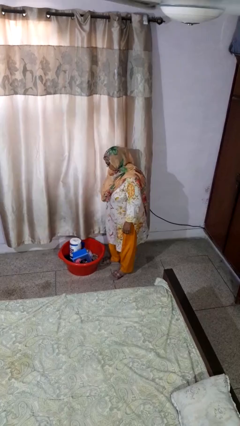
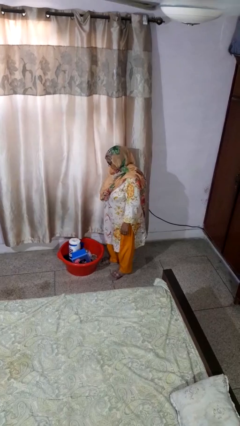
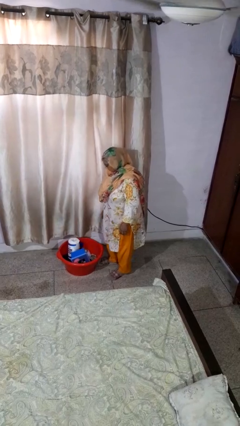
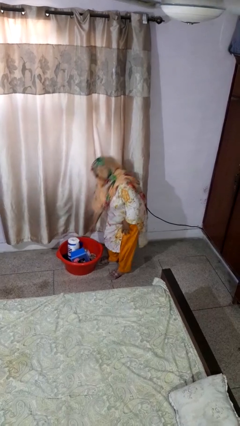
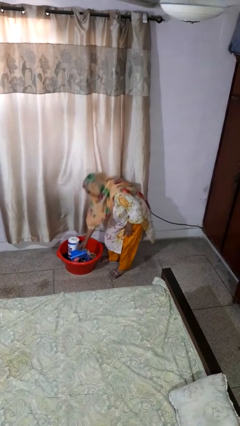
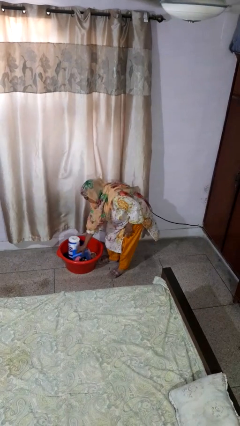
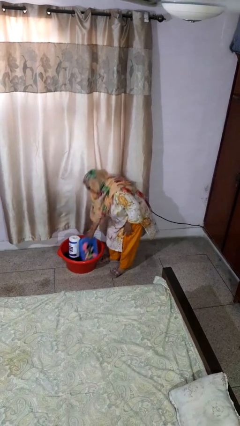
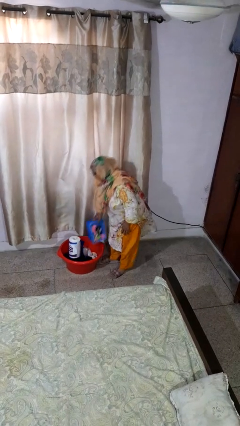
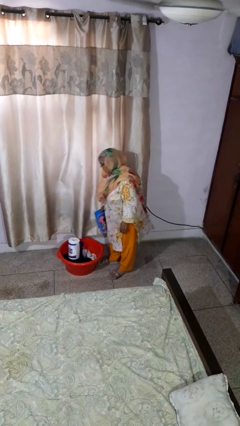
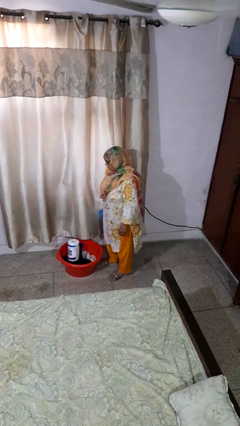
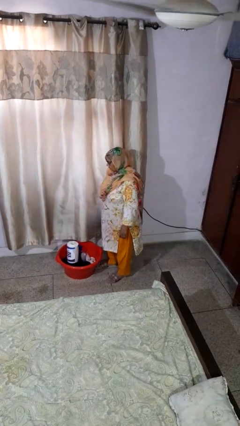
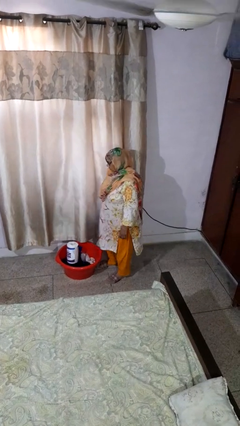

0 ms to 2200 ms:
person takes object from basket

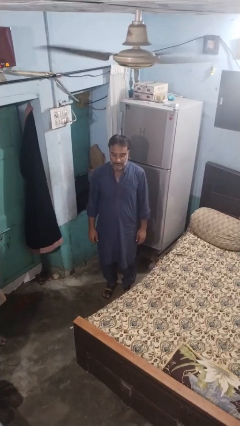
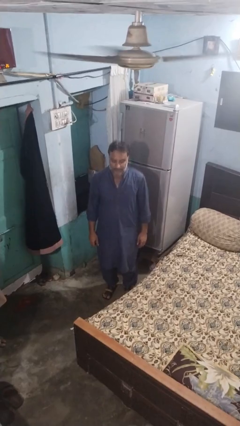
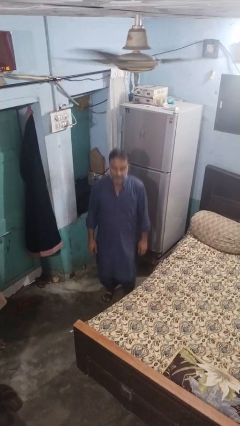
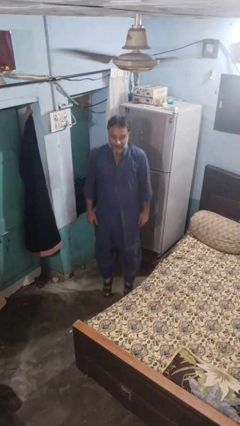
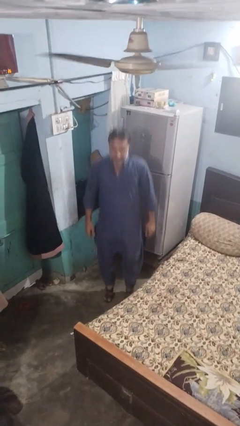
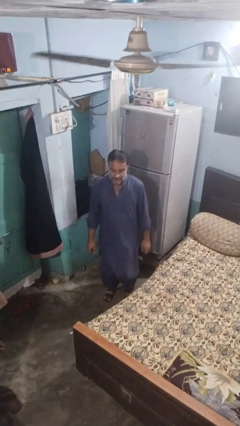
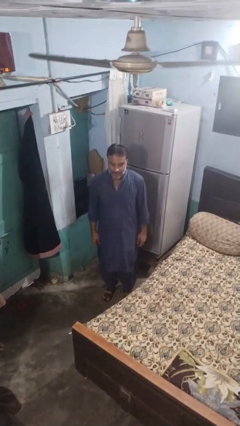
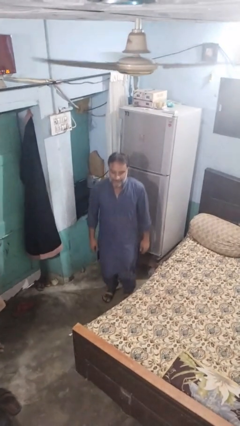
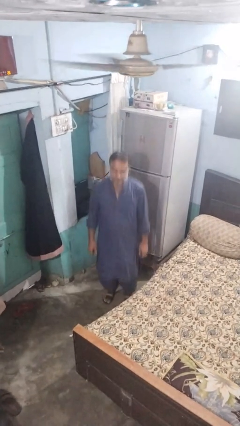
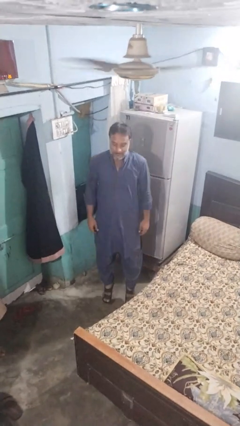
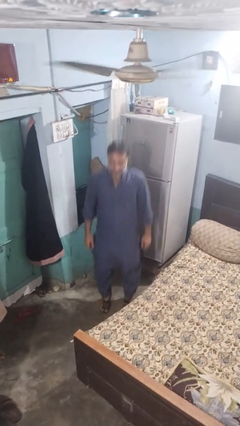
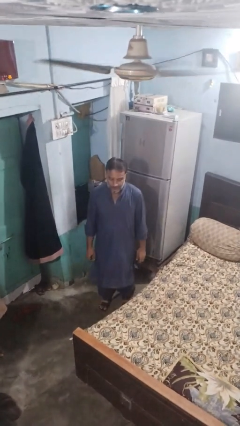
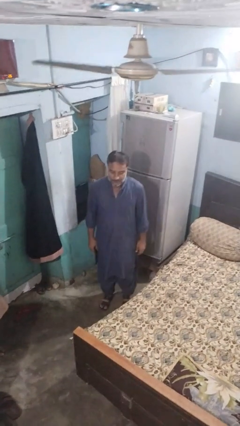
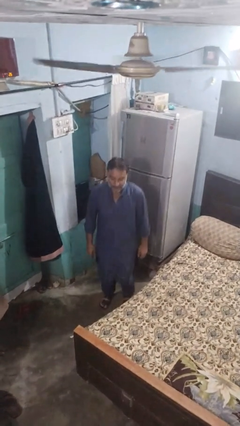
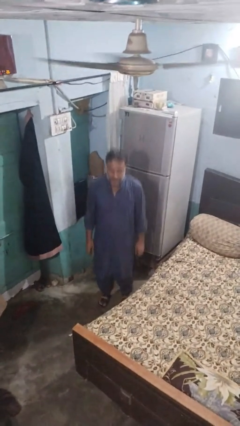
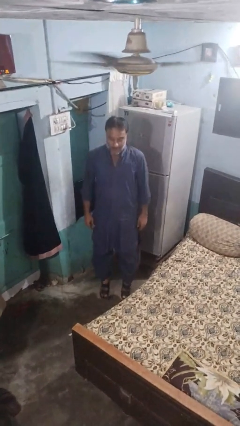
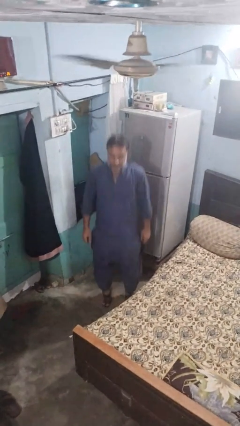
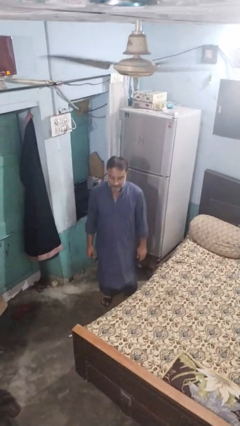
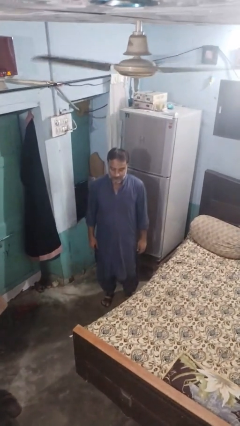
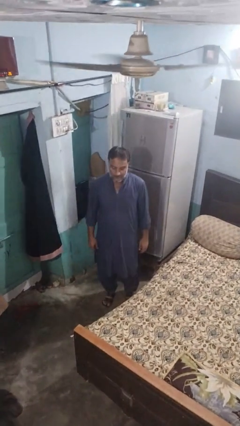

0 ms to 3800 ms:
person jumps

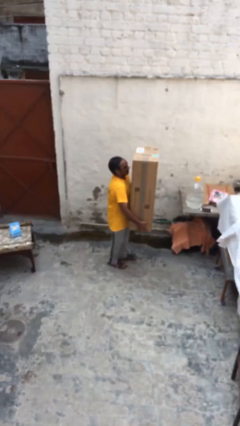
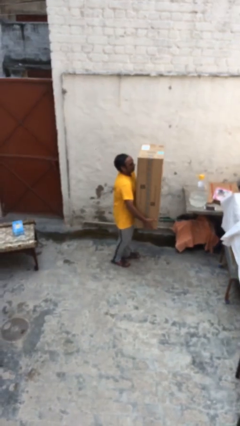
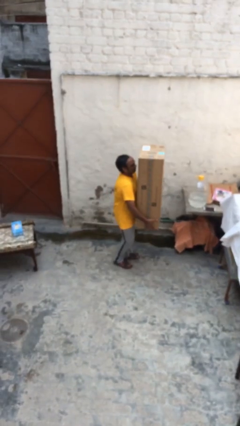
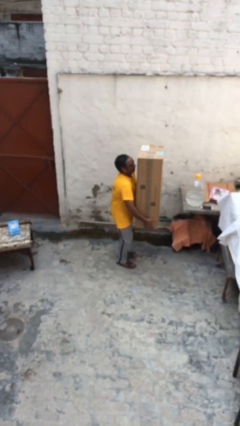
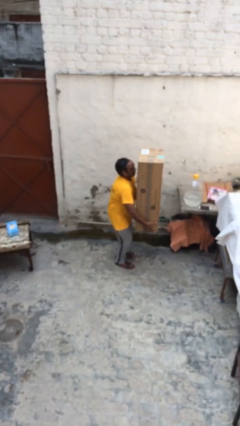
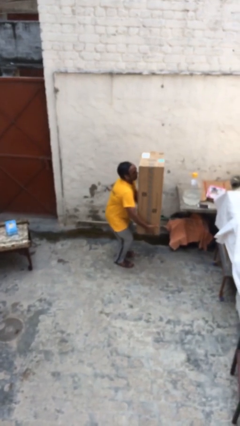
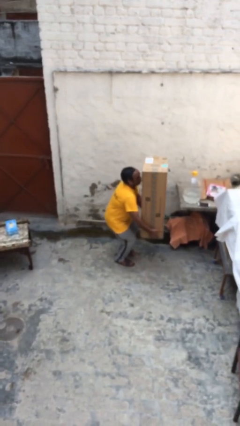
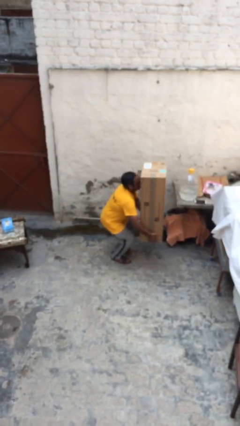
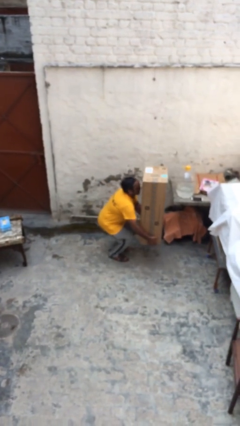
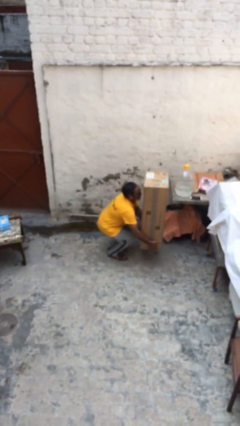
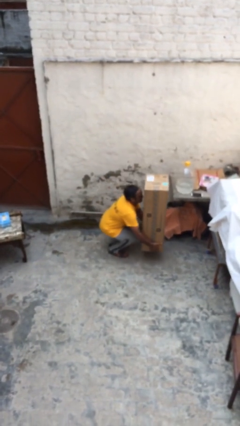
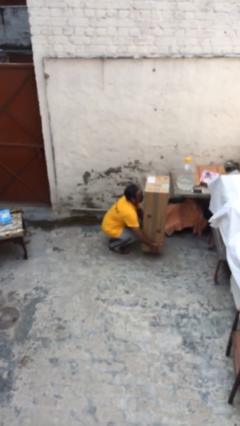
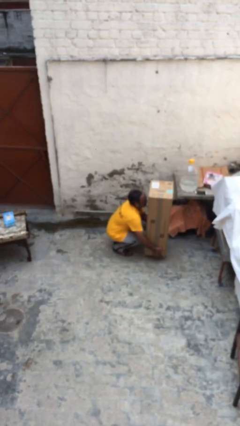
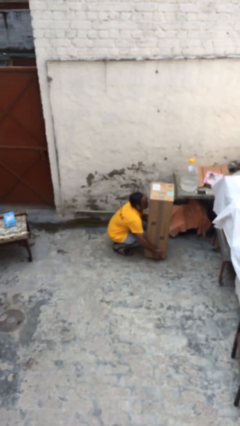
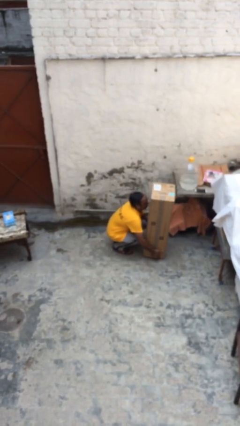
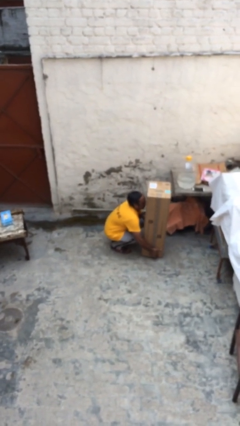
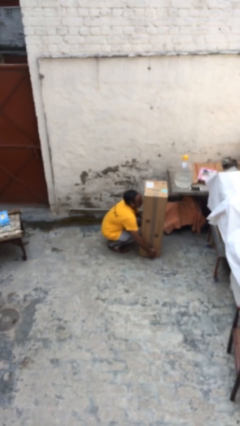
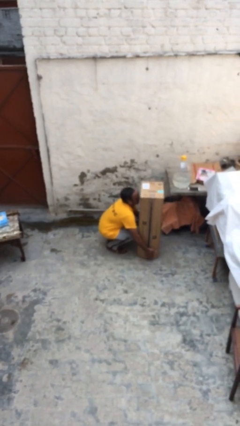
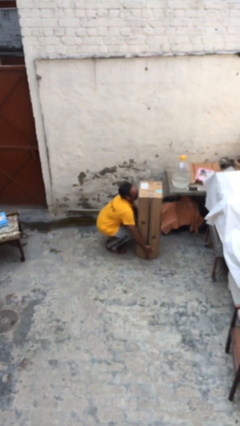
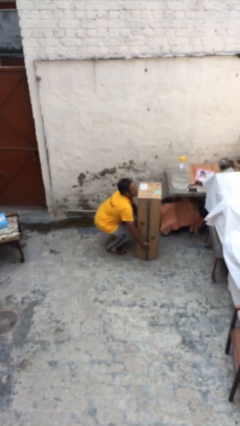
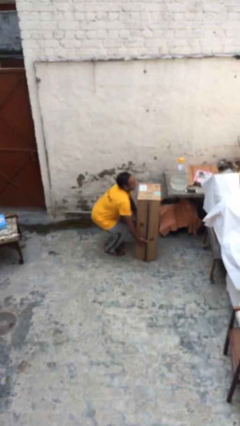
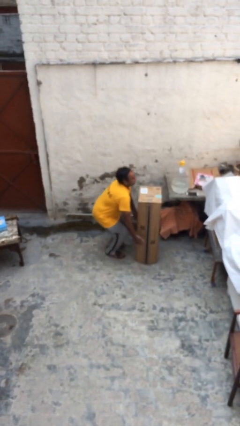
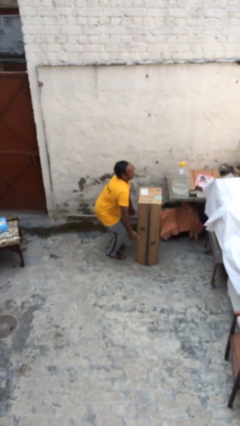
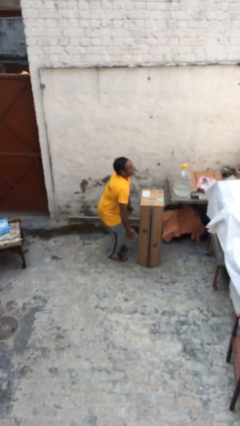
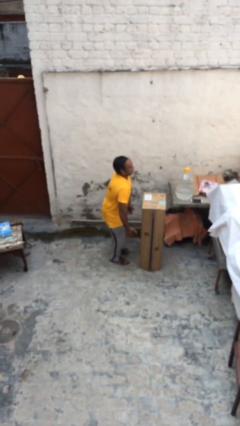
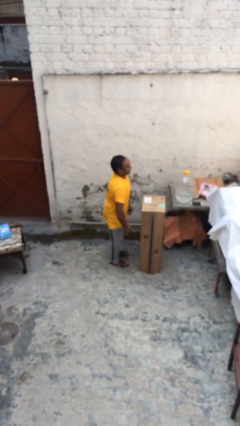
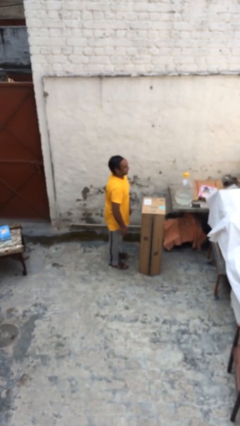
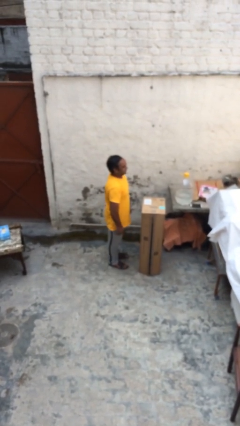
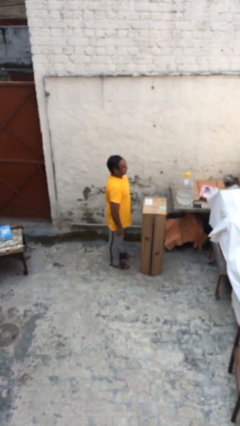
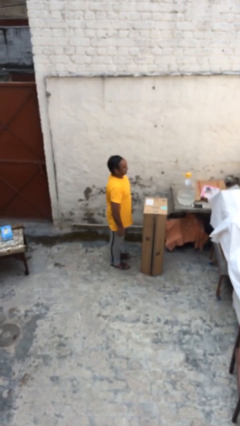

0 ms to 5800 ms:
person puts down object on floor

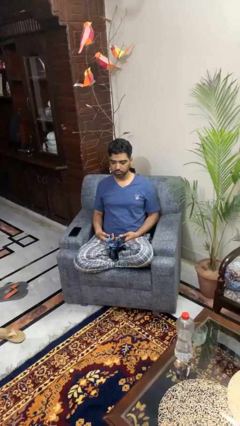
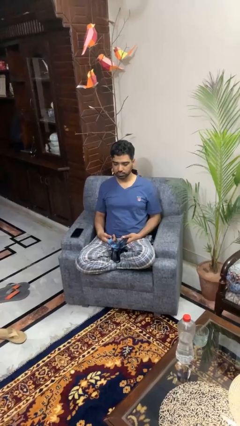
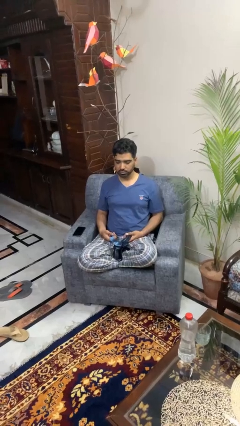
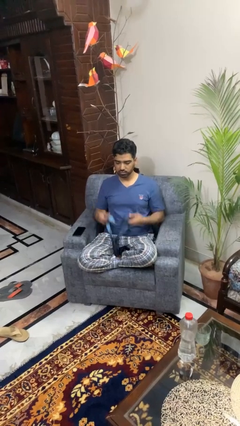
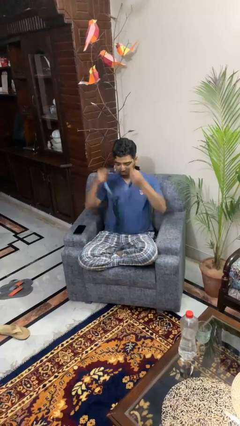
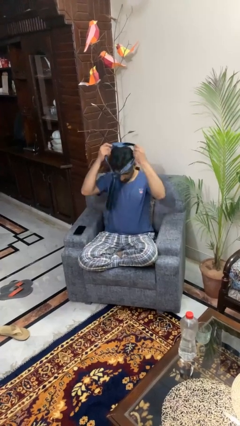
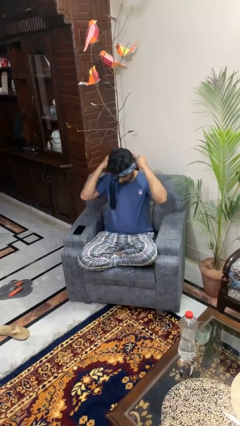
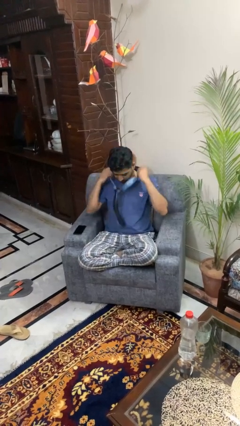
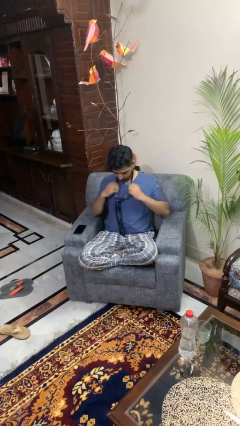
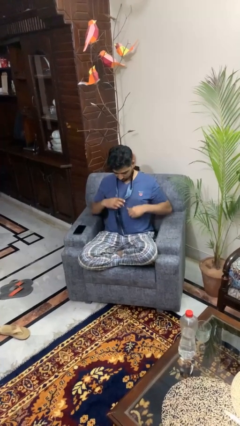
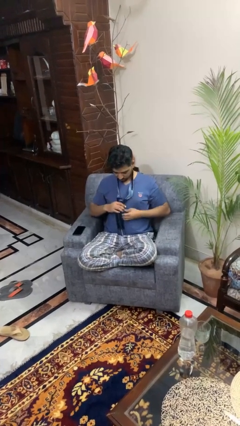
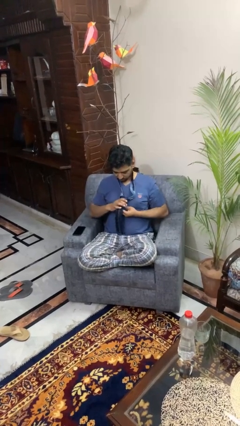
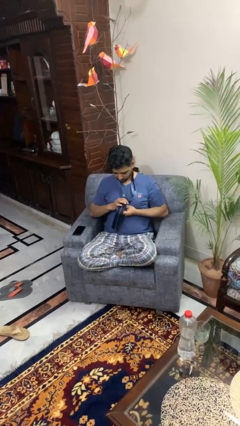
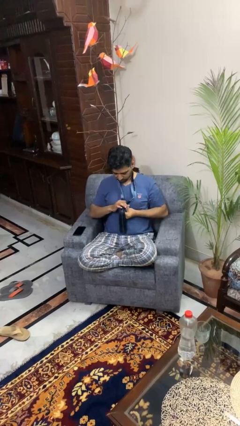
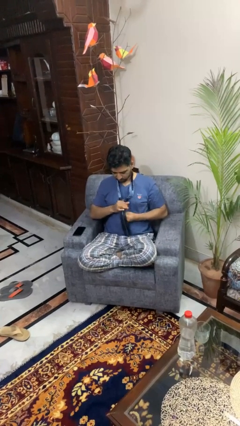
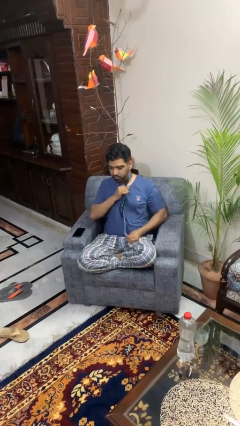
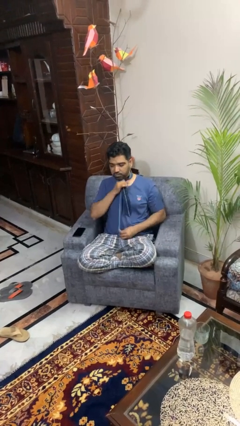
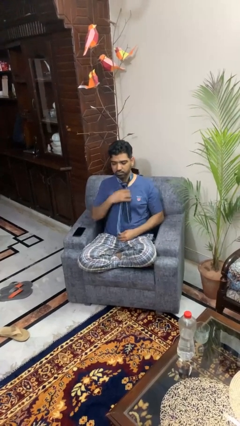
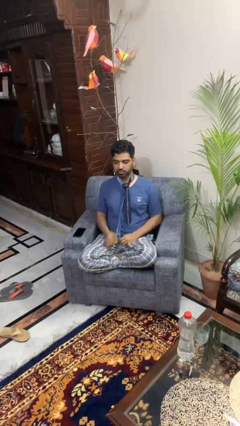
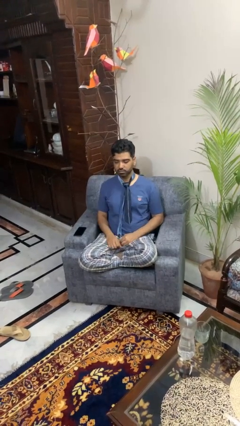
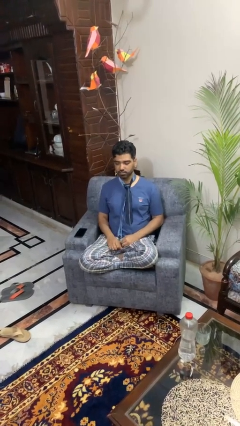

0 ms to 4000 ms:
person puts on necktie

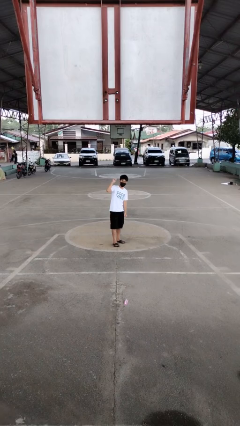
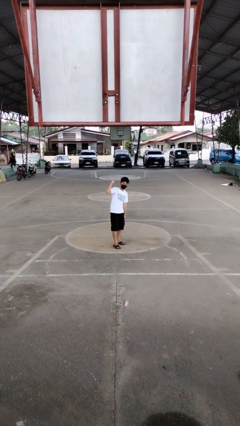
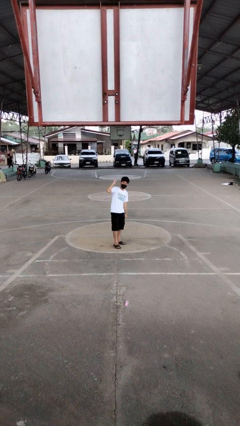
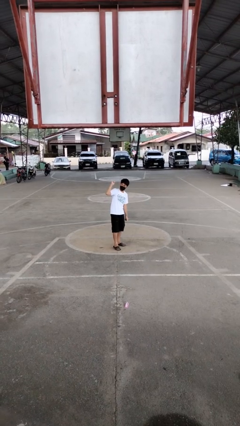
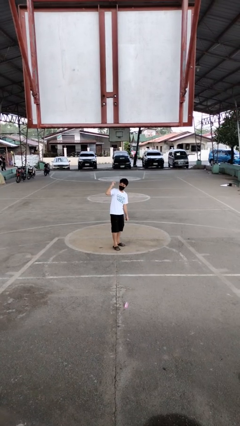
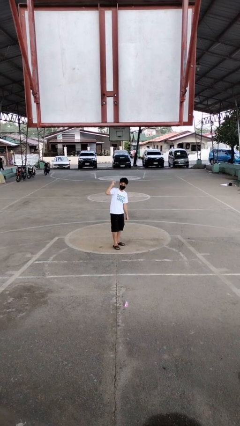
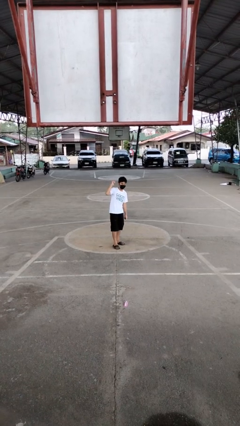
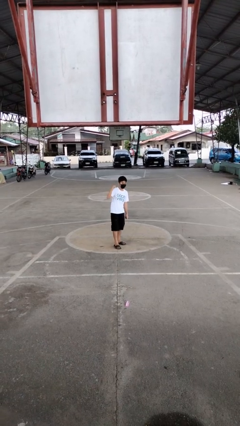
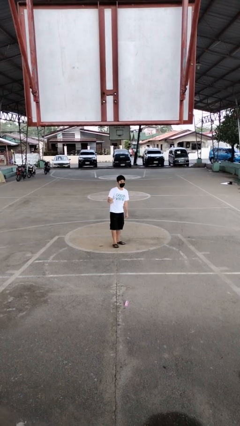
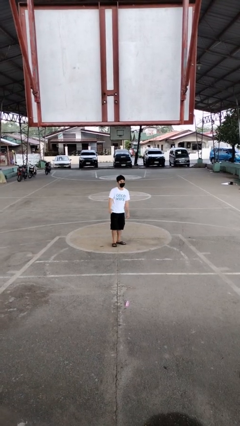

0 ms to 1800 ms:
person gestures behind me
